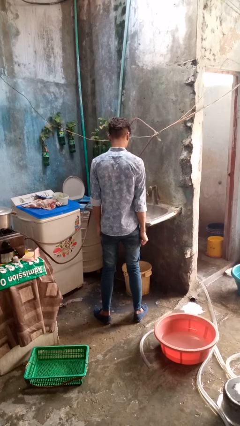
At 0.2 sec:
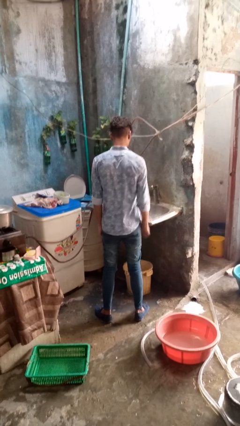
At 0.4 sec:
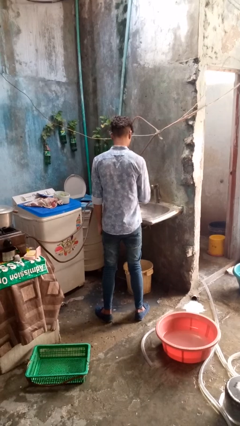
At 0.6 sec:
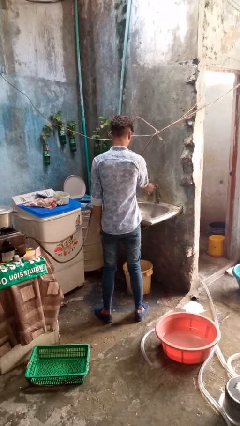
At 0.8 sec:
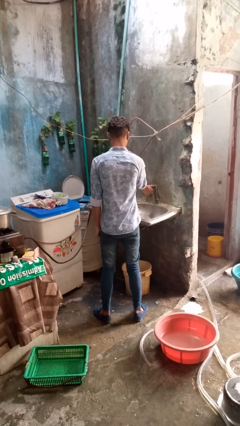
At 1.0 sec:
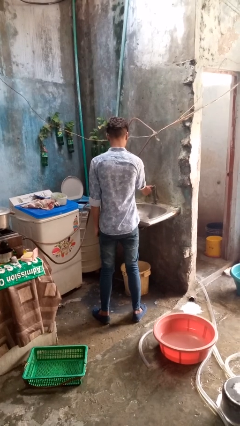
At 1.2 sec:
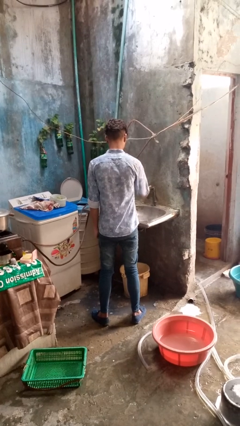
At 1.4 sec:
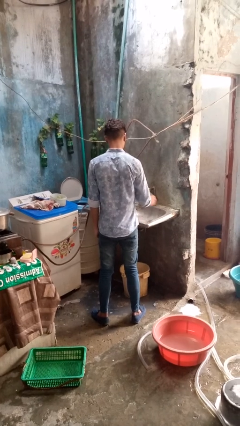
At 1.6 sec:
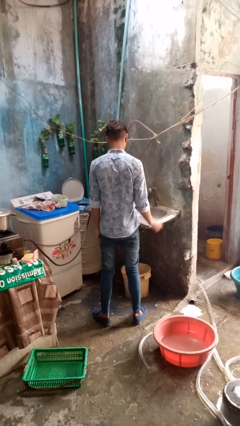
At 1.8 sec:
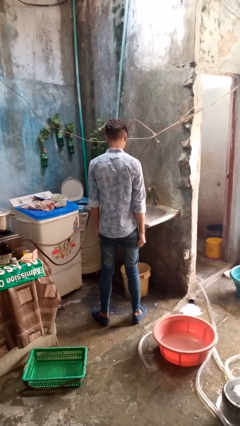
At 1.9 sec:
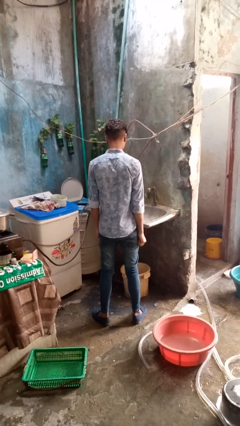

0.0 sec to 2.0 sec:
person turns off faucet

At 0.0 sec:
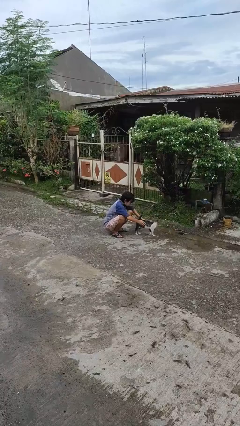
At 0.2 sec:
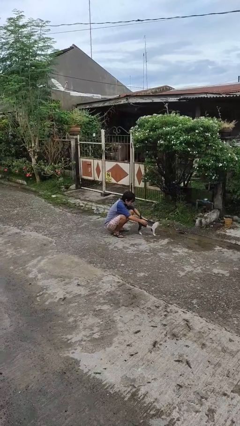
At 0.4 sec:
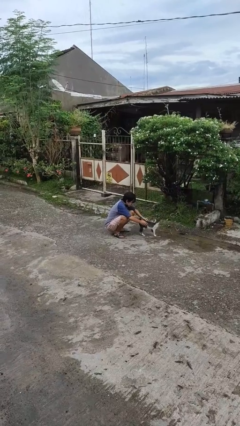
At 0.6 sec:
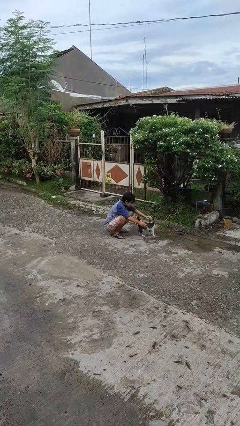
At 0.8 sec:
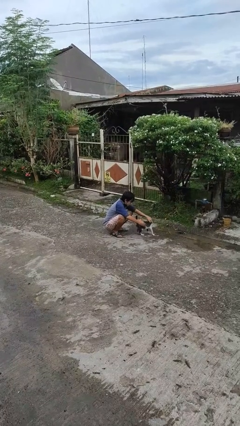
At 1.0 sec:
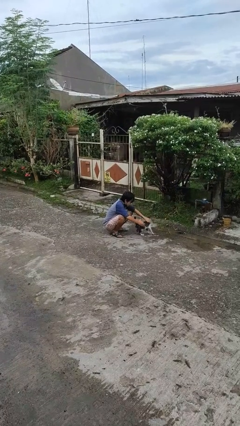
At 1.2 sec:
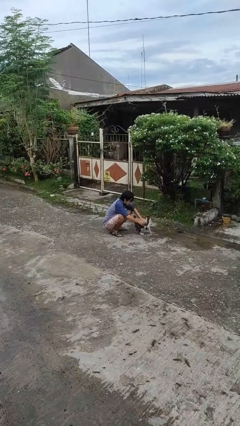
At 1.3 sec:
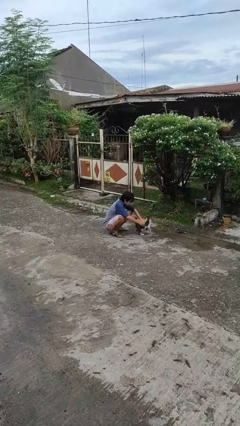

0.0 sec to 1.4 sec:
person pets cat

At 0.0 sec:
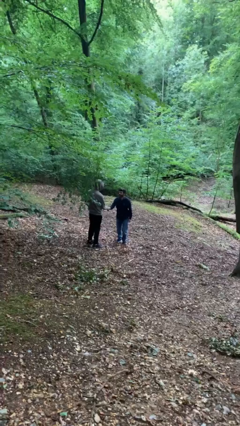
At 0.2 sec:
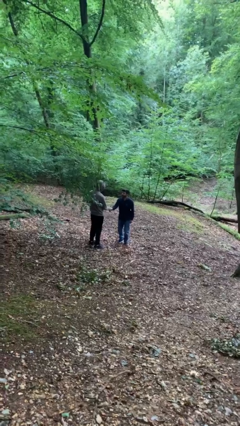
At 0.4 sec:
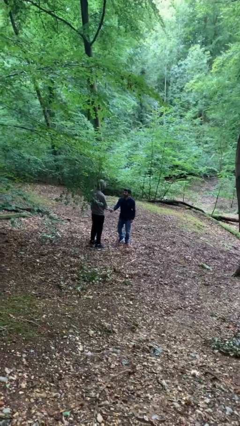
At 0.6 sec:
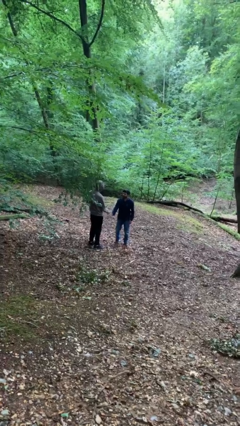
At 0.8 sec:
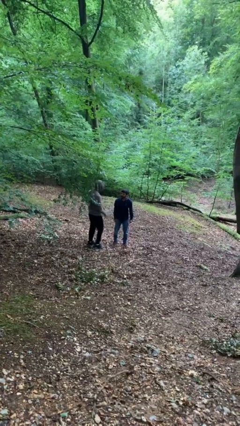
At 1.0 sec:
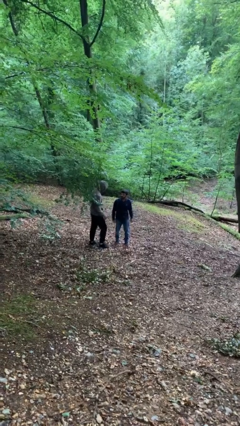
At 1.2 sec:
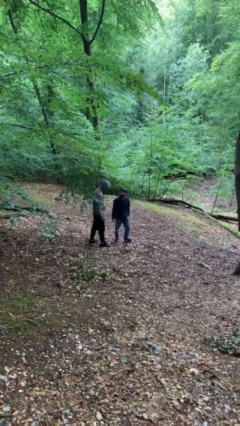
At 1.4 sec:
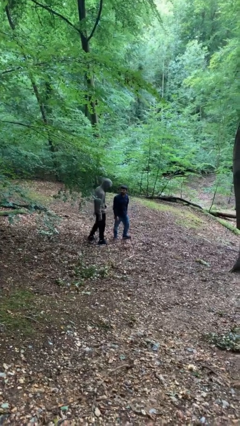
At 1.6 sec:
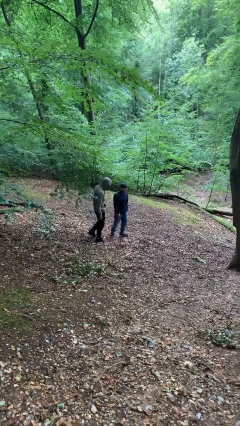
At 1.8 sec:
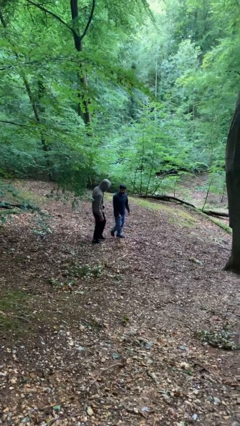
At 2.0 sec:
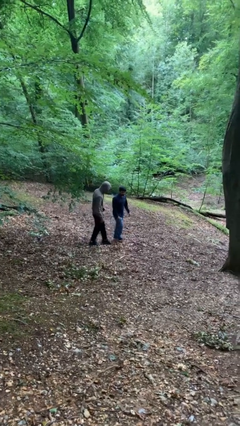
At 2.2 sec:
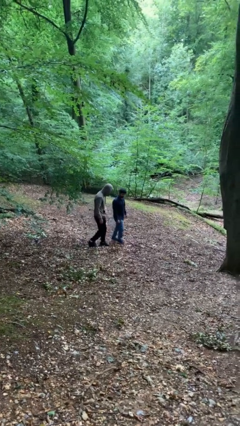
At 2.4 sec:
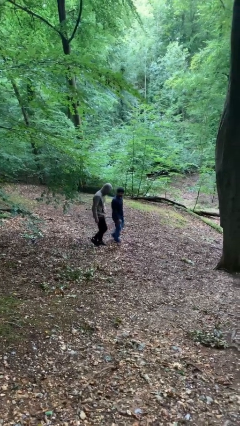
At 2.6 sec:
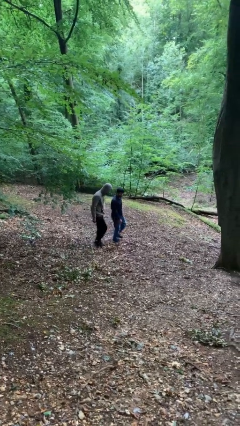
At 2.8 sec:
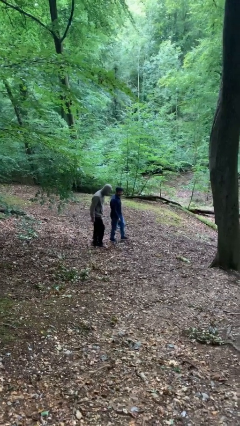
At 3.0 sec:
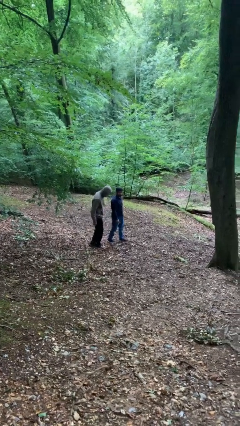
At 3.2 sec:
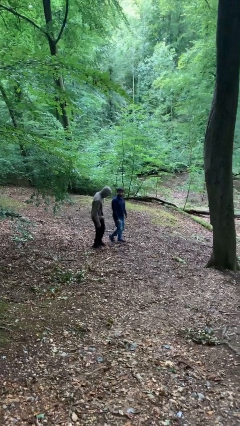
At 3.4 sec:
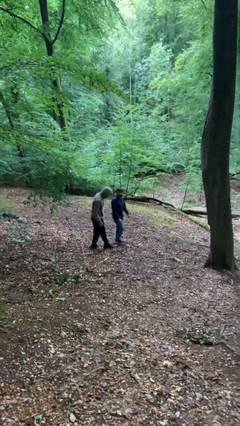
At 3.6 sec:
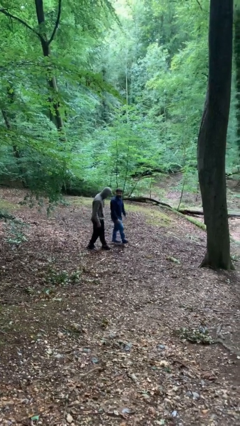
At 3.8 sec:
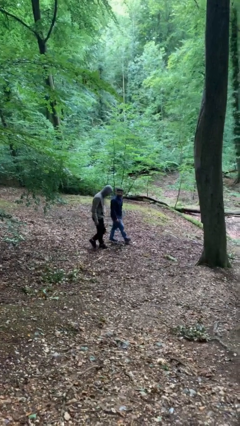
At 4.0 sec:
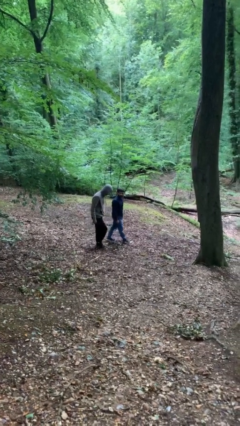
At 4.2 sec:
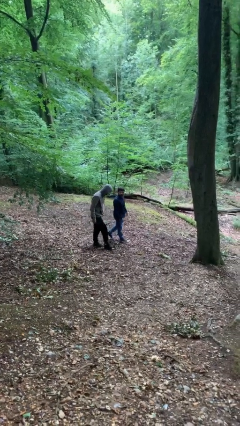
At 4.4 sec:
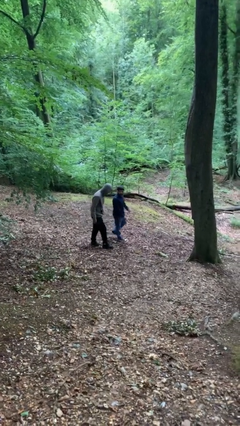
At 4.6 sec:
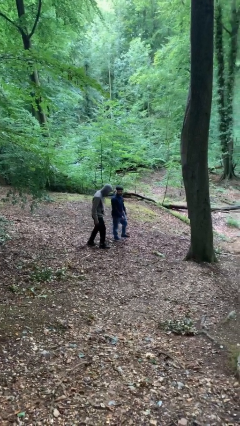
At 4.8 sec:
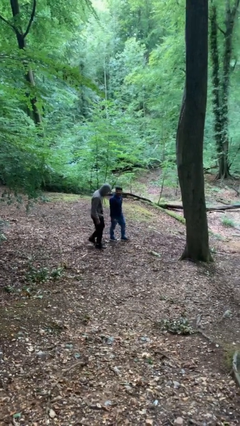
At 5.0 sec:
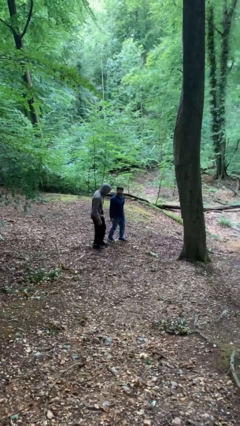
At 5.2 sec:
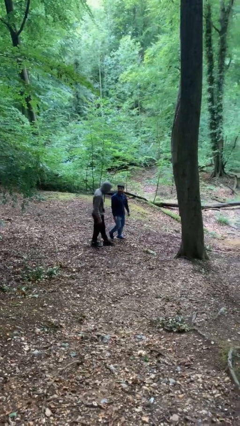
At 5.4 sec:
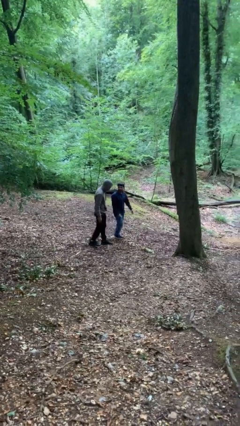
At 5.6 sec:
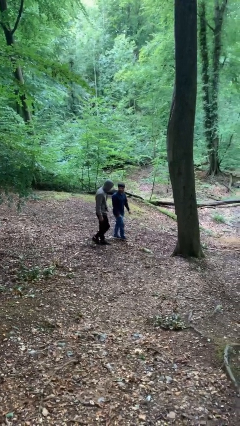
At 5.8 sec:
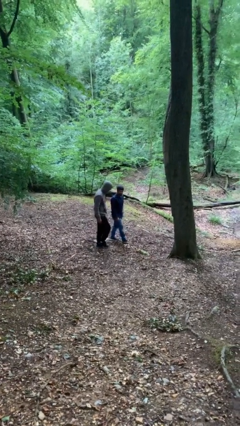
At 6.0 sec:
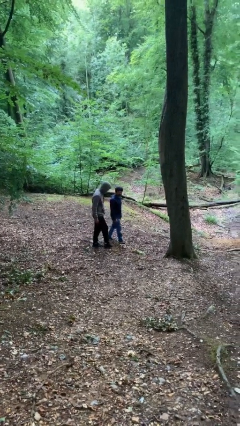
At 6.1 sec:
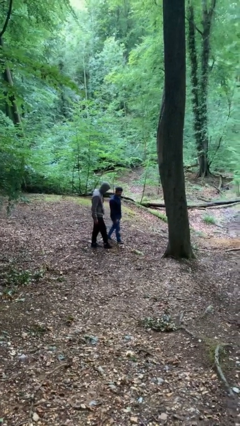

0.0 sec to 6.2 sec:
person talks to person

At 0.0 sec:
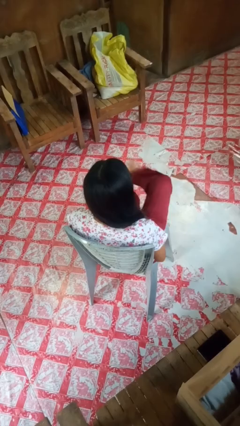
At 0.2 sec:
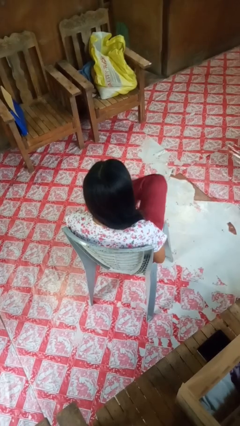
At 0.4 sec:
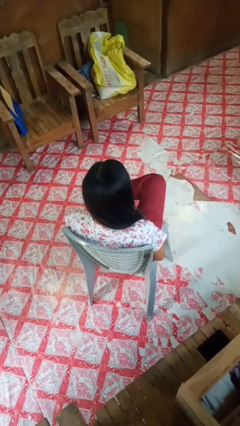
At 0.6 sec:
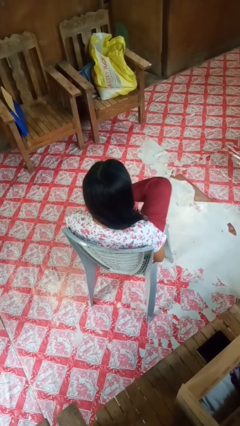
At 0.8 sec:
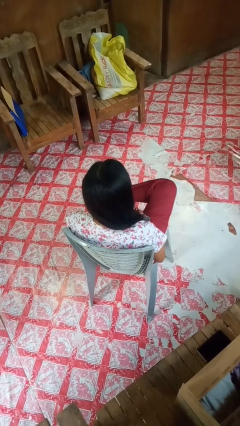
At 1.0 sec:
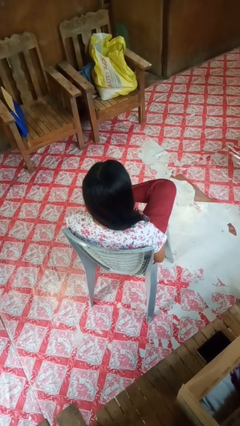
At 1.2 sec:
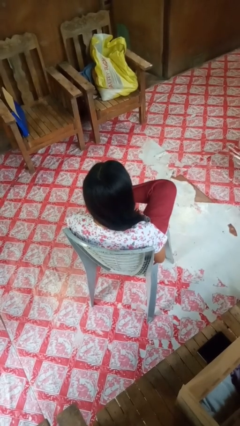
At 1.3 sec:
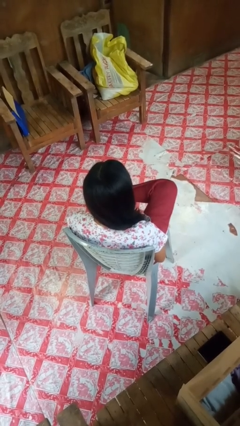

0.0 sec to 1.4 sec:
person crosses legs

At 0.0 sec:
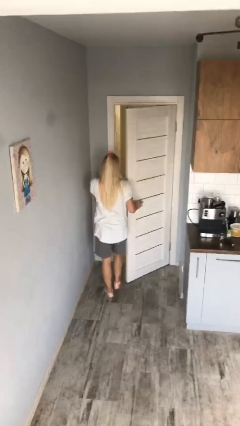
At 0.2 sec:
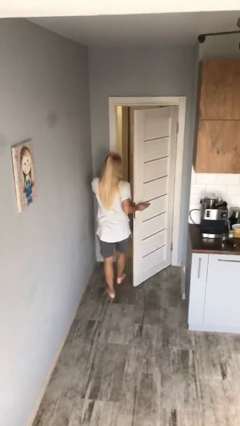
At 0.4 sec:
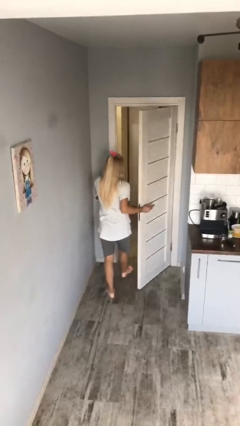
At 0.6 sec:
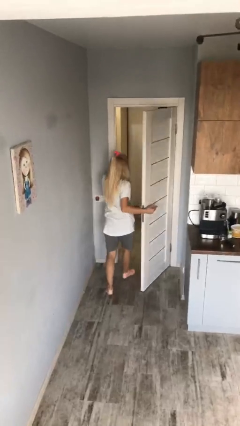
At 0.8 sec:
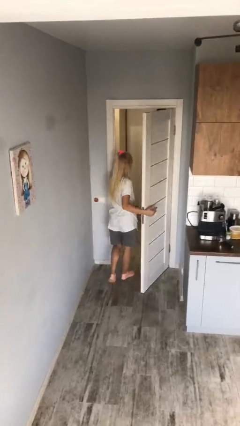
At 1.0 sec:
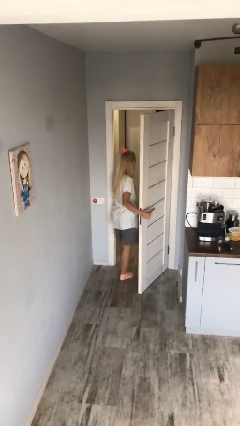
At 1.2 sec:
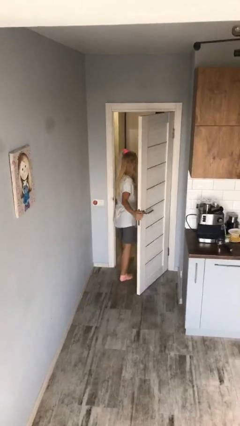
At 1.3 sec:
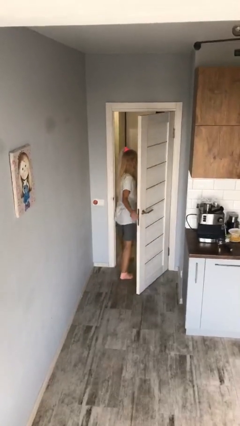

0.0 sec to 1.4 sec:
person exits scene through structure

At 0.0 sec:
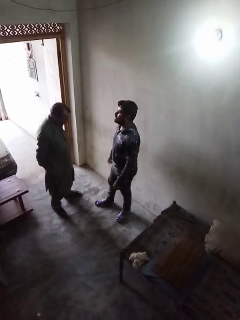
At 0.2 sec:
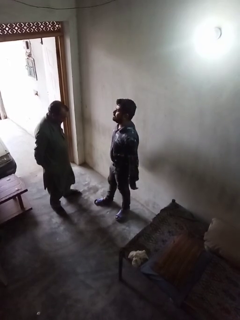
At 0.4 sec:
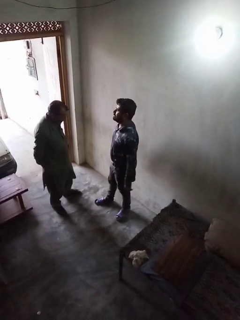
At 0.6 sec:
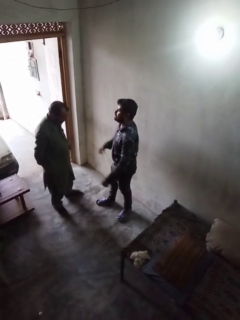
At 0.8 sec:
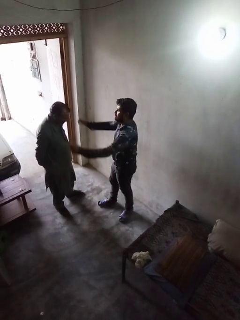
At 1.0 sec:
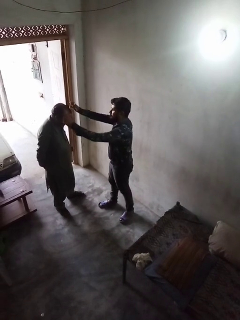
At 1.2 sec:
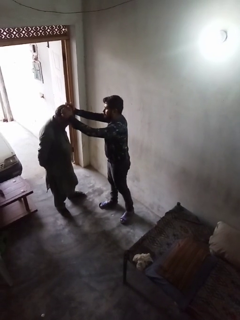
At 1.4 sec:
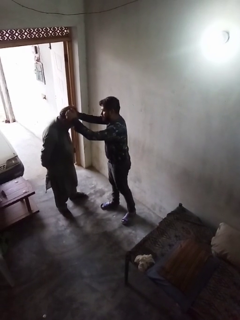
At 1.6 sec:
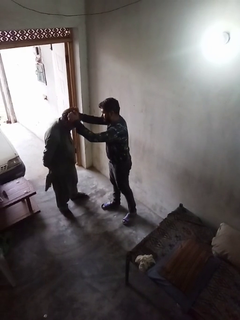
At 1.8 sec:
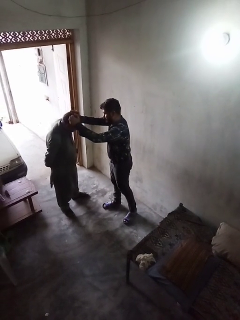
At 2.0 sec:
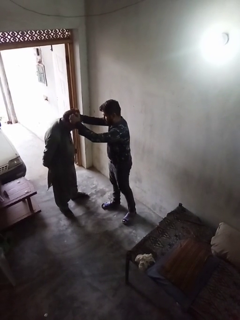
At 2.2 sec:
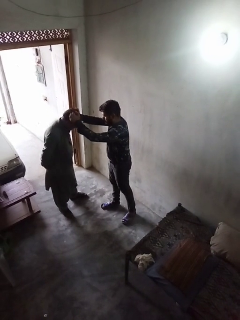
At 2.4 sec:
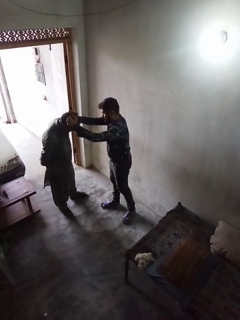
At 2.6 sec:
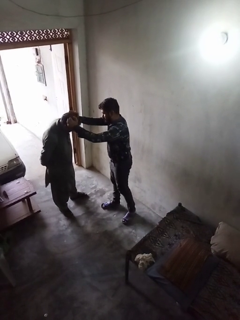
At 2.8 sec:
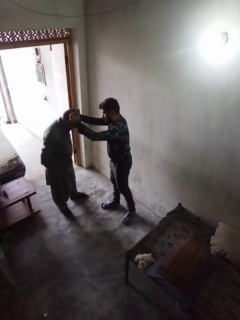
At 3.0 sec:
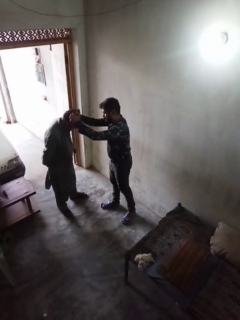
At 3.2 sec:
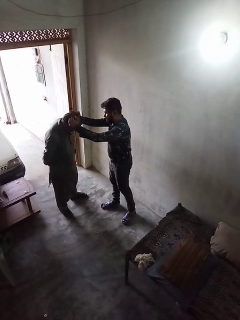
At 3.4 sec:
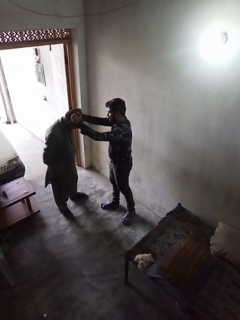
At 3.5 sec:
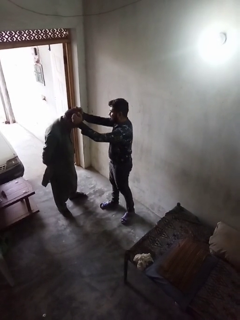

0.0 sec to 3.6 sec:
person grabs person by hair

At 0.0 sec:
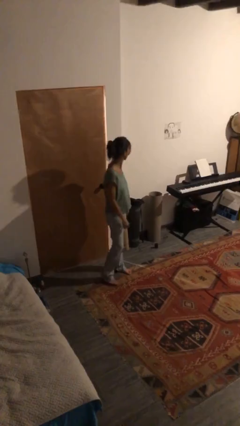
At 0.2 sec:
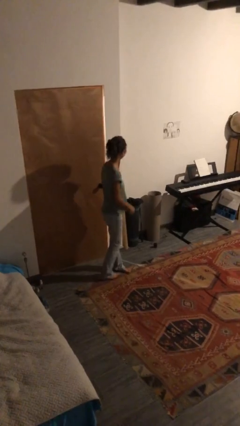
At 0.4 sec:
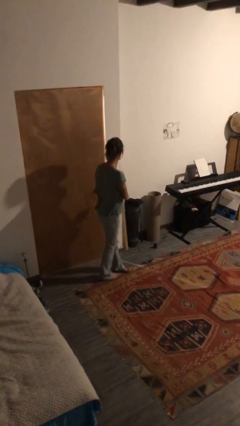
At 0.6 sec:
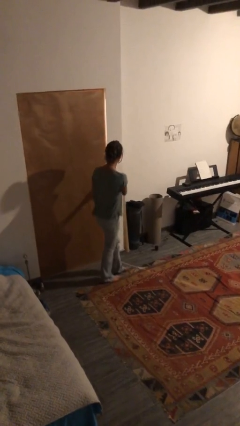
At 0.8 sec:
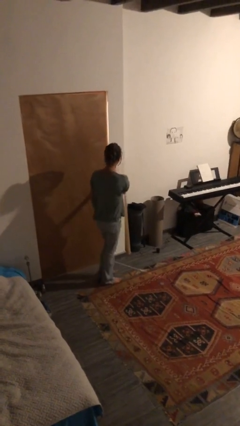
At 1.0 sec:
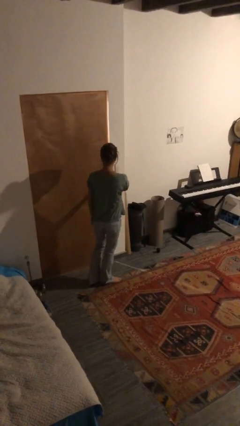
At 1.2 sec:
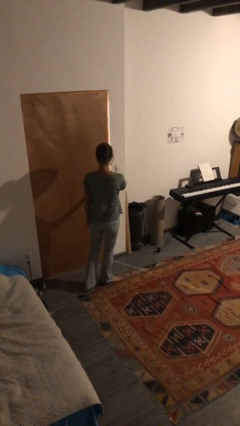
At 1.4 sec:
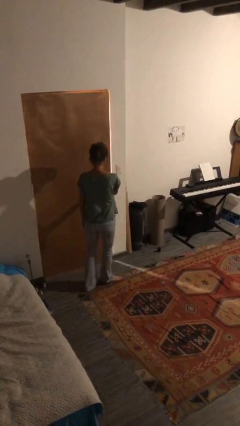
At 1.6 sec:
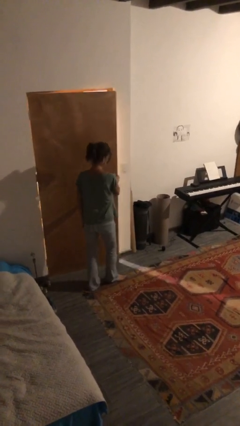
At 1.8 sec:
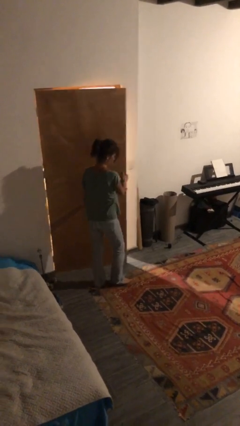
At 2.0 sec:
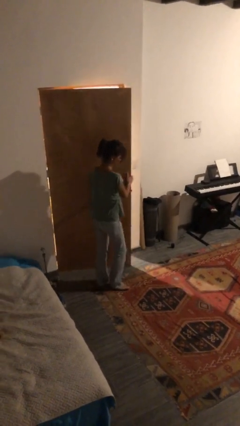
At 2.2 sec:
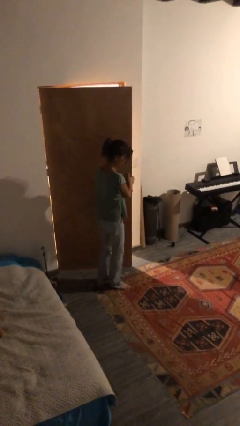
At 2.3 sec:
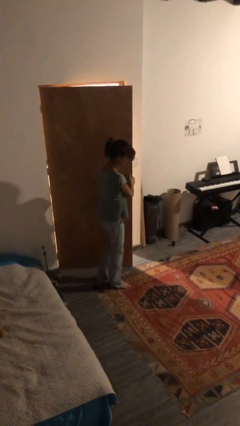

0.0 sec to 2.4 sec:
person opens facility door
